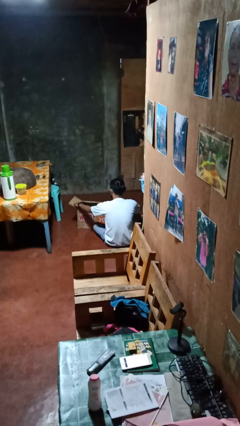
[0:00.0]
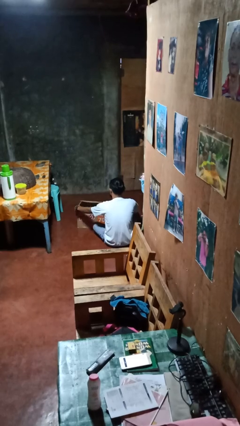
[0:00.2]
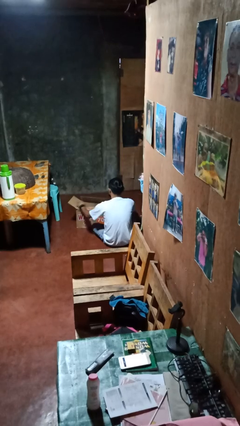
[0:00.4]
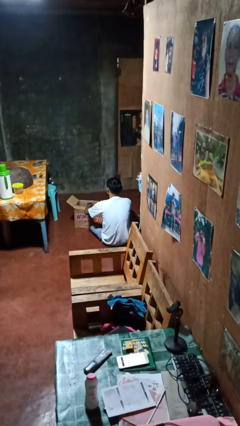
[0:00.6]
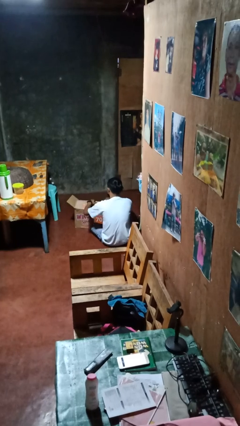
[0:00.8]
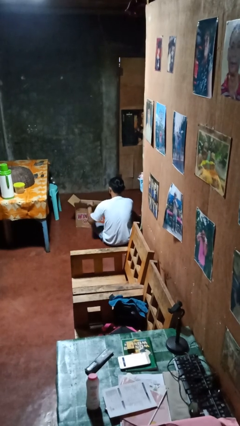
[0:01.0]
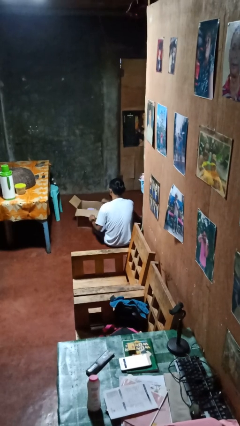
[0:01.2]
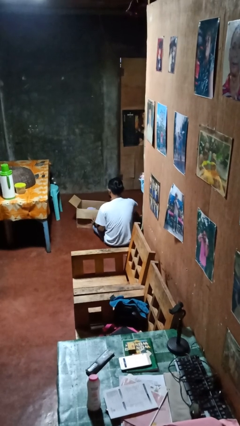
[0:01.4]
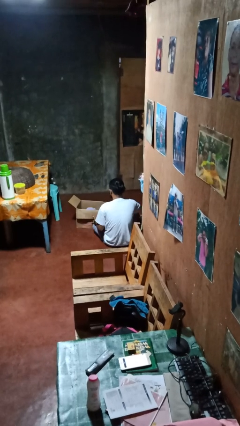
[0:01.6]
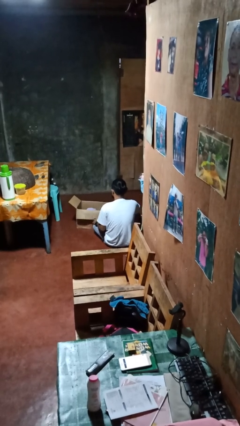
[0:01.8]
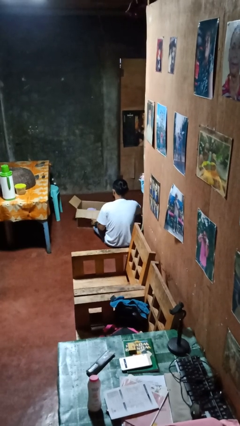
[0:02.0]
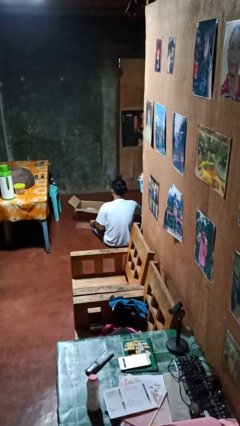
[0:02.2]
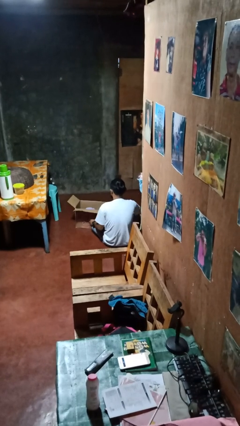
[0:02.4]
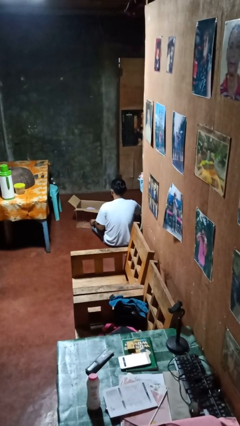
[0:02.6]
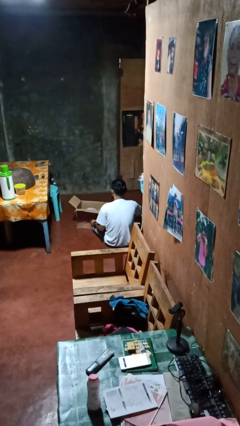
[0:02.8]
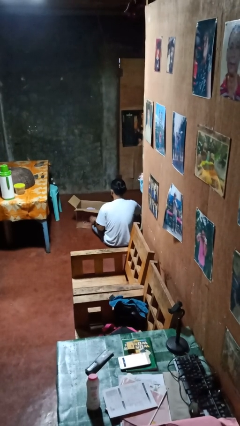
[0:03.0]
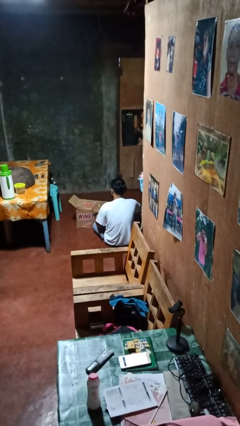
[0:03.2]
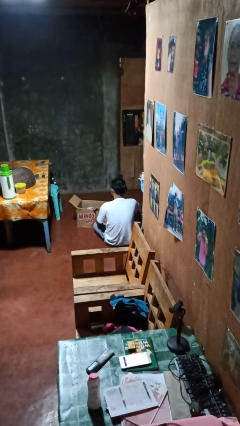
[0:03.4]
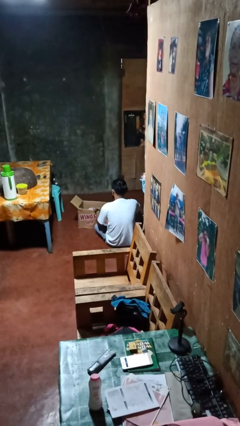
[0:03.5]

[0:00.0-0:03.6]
person opens box

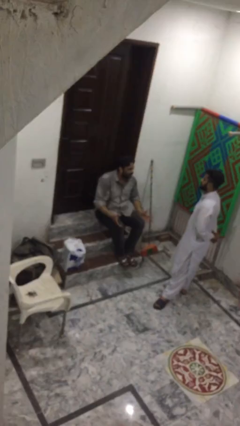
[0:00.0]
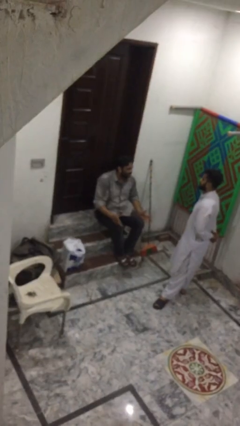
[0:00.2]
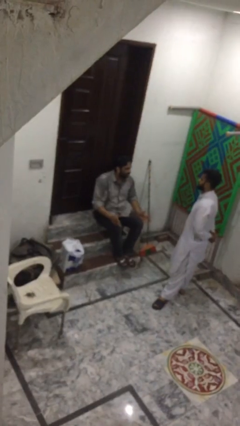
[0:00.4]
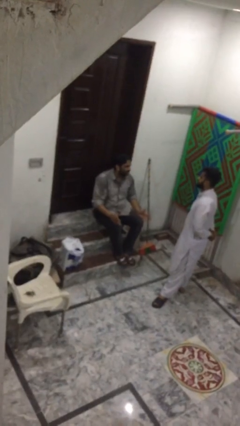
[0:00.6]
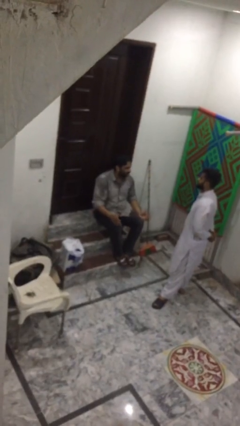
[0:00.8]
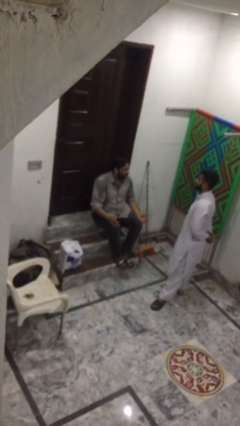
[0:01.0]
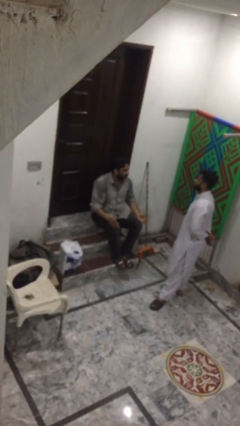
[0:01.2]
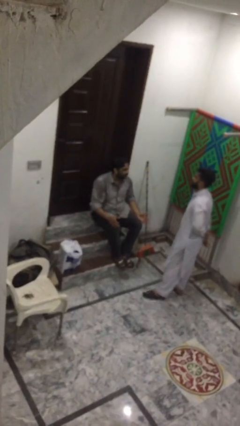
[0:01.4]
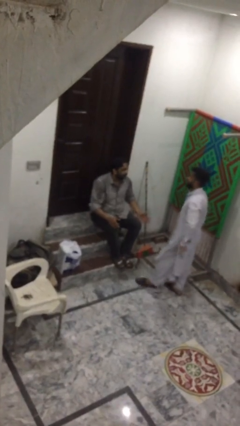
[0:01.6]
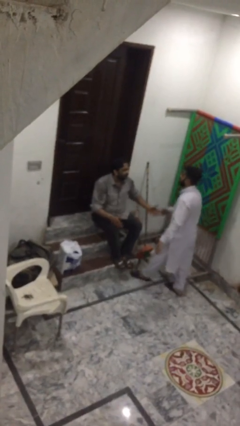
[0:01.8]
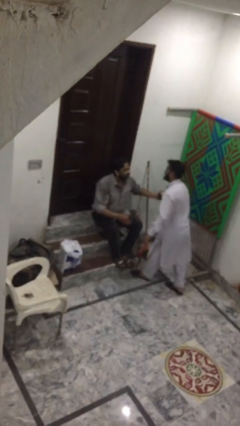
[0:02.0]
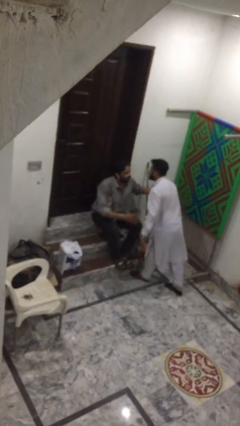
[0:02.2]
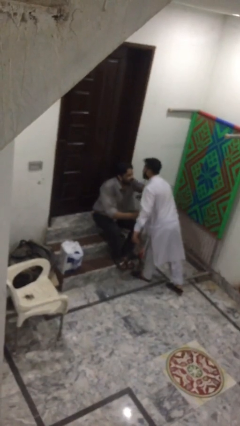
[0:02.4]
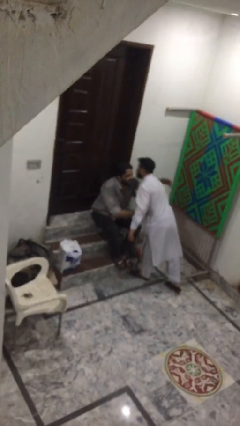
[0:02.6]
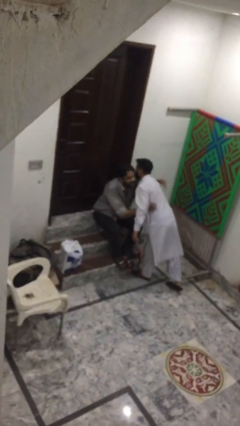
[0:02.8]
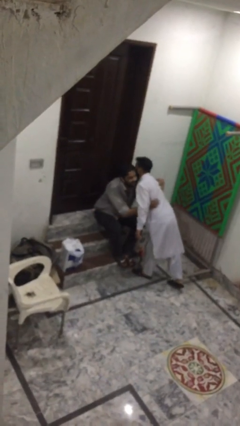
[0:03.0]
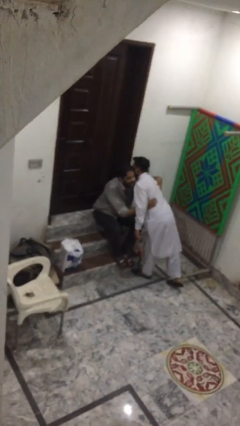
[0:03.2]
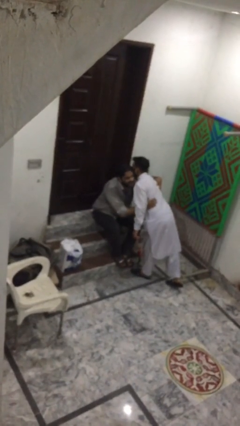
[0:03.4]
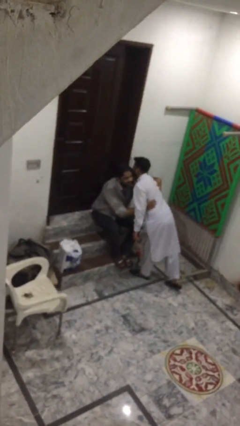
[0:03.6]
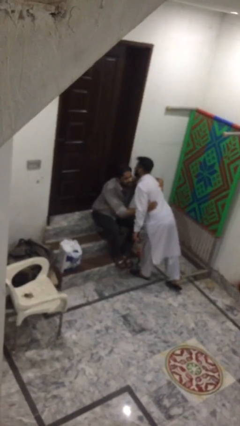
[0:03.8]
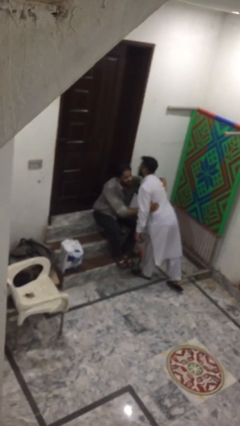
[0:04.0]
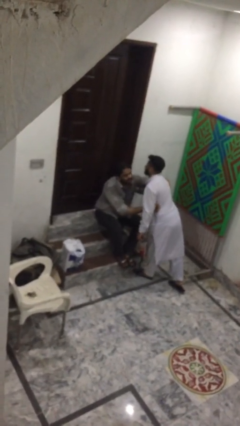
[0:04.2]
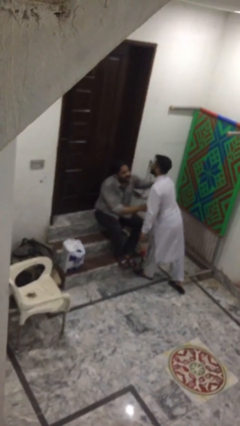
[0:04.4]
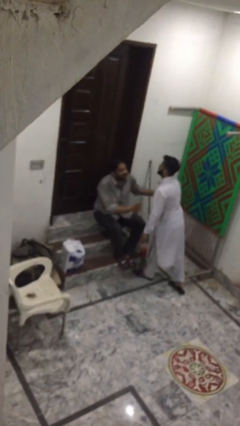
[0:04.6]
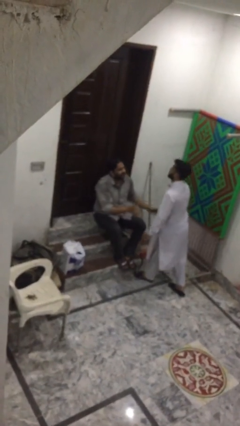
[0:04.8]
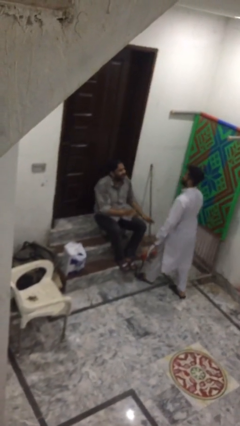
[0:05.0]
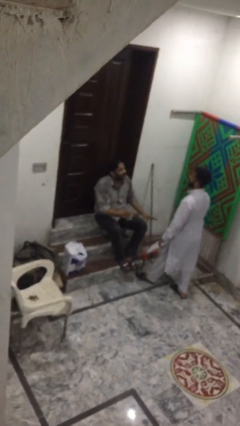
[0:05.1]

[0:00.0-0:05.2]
person embraces person

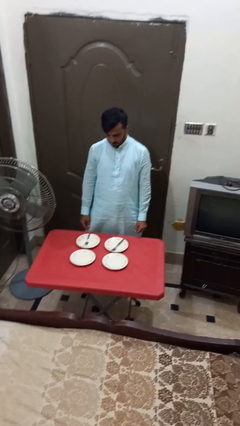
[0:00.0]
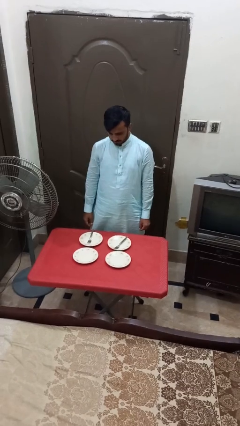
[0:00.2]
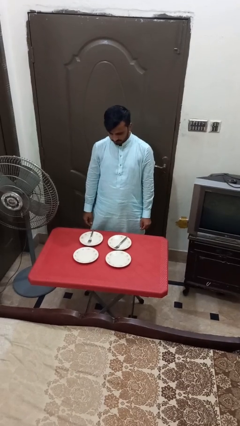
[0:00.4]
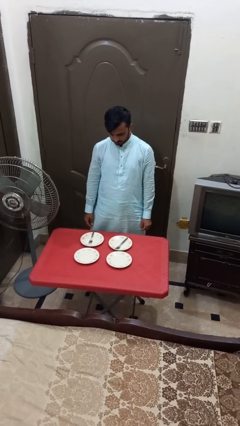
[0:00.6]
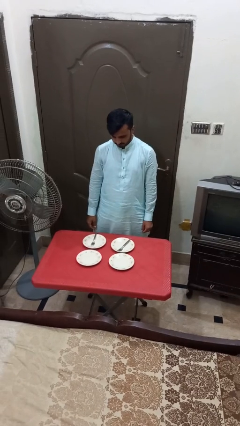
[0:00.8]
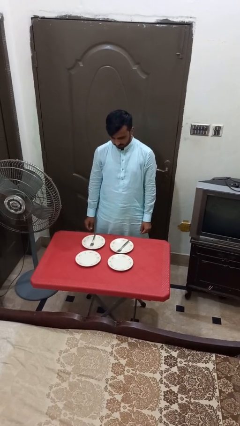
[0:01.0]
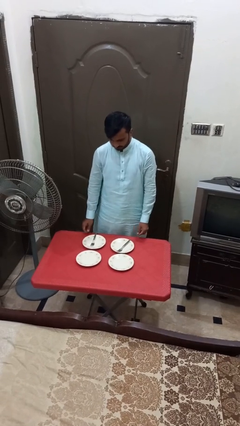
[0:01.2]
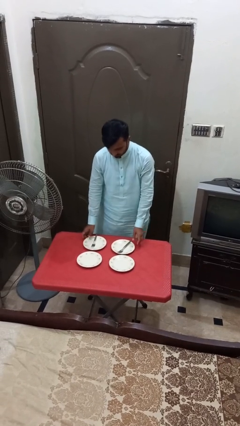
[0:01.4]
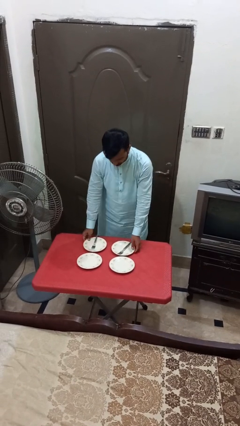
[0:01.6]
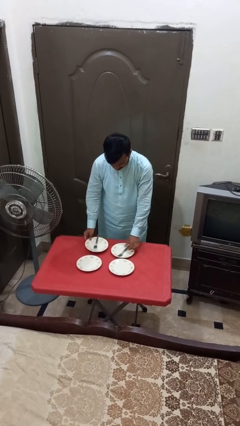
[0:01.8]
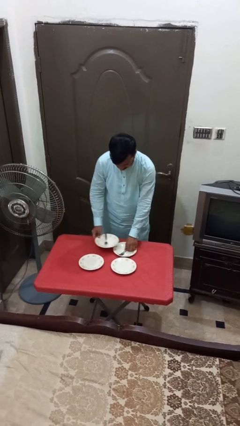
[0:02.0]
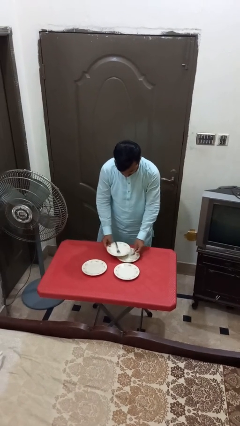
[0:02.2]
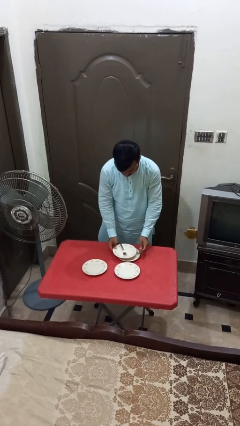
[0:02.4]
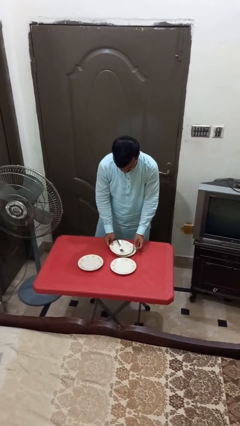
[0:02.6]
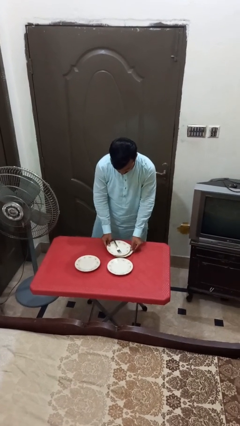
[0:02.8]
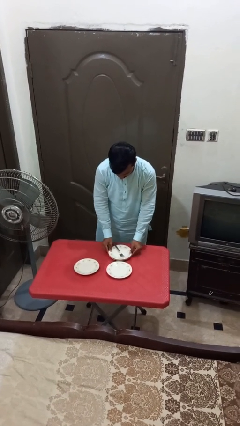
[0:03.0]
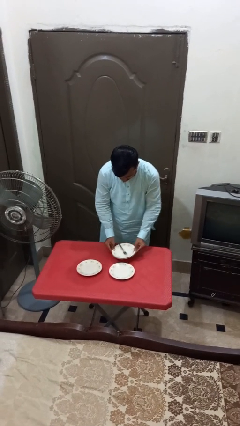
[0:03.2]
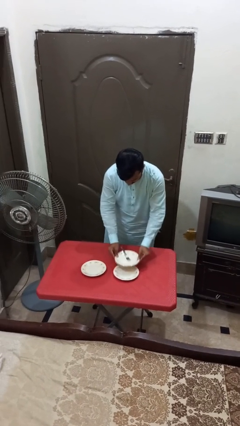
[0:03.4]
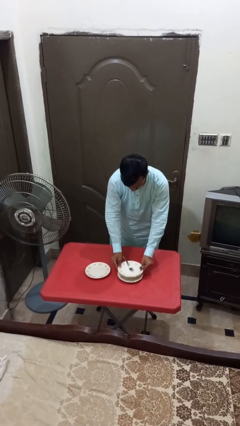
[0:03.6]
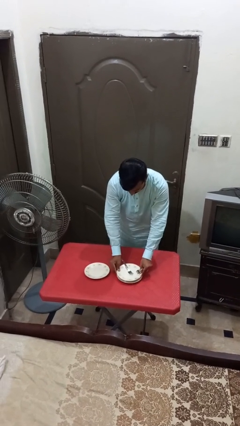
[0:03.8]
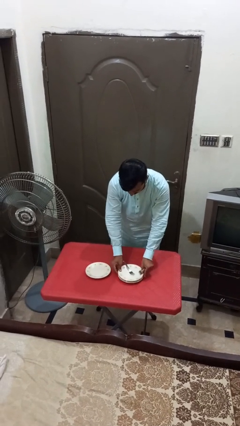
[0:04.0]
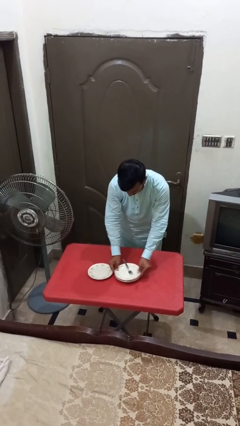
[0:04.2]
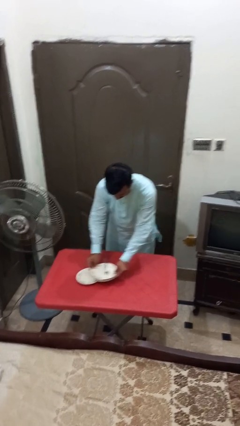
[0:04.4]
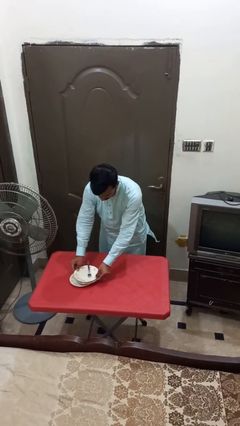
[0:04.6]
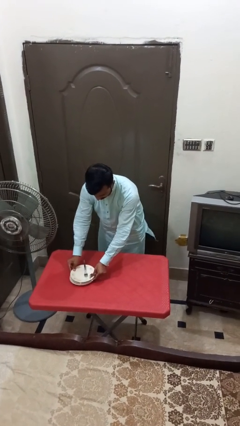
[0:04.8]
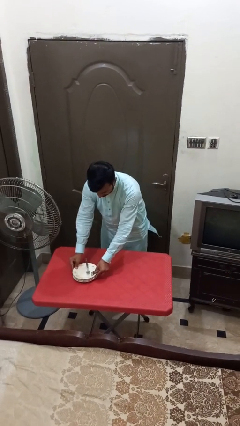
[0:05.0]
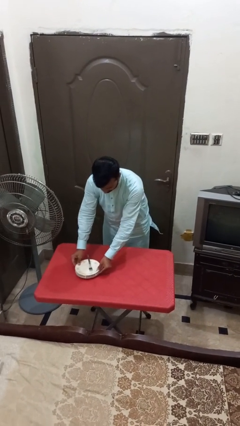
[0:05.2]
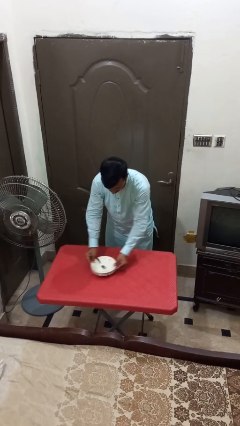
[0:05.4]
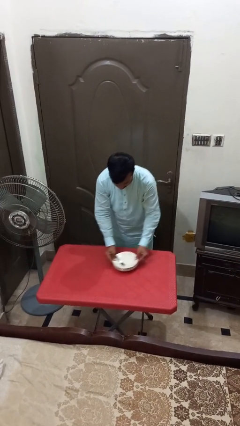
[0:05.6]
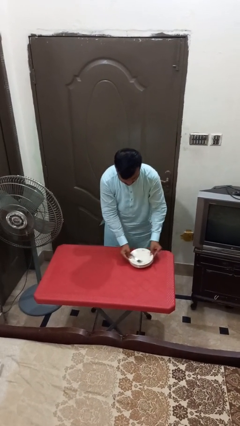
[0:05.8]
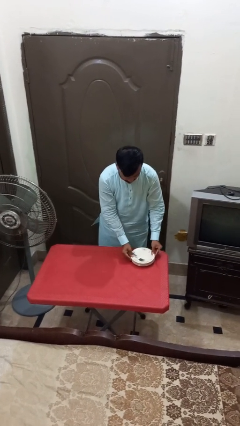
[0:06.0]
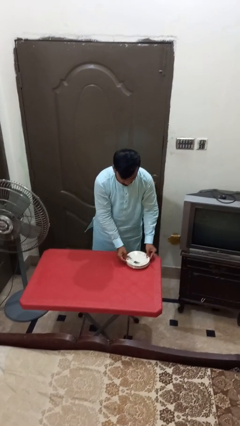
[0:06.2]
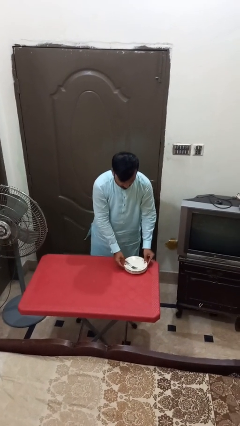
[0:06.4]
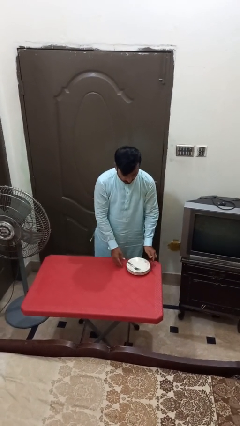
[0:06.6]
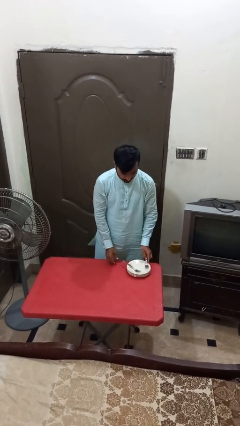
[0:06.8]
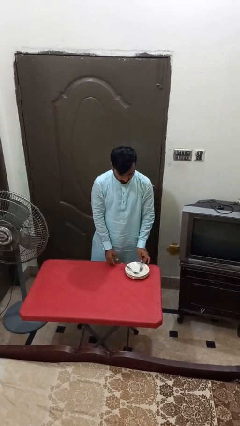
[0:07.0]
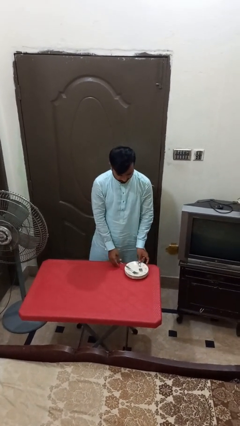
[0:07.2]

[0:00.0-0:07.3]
person sets table

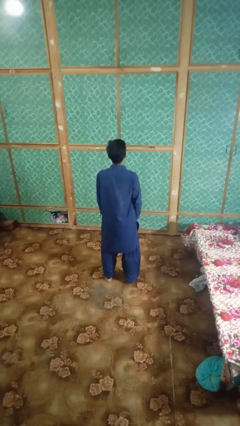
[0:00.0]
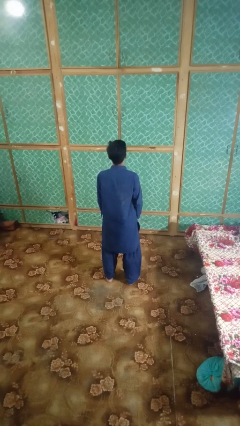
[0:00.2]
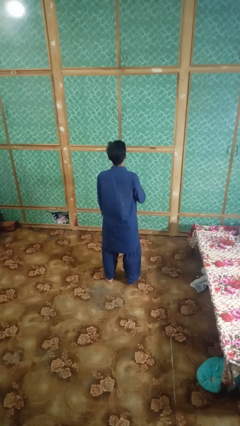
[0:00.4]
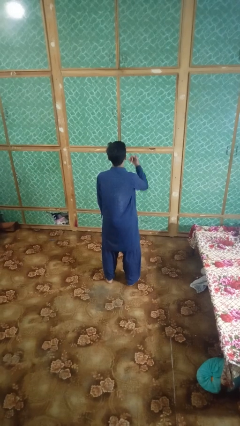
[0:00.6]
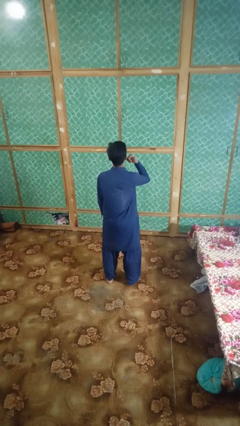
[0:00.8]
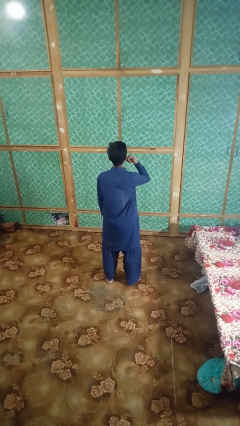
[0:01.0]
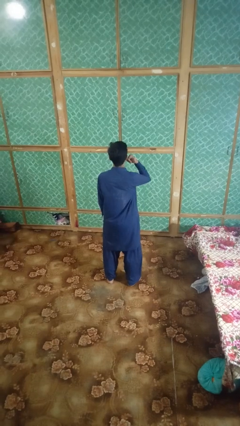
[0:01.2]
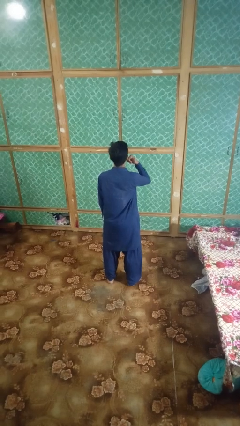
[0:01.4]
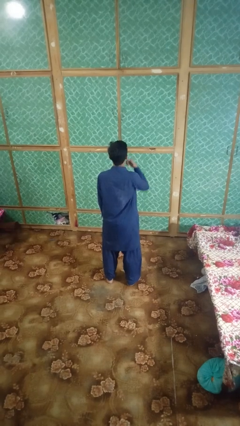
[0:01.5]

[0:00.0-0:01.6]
person gestures call me

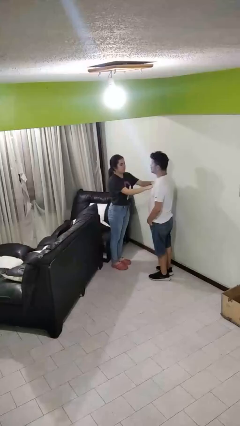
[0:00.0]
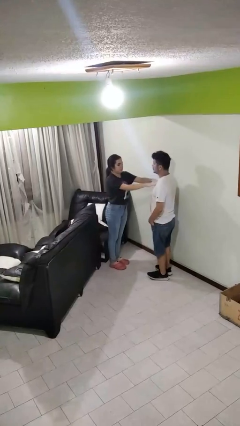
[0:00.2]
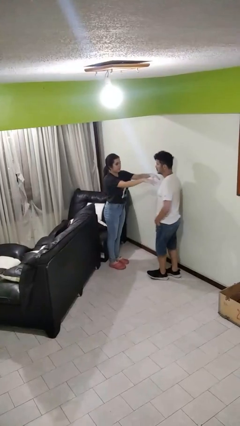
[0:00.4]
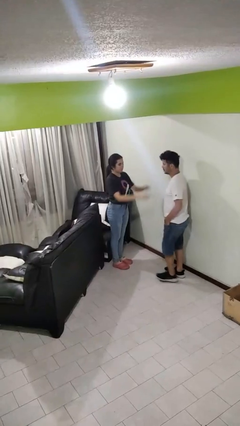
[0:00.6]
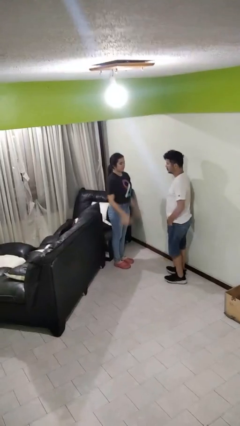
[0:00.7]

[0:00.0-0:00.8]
person shoves person
